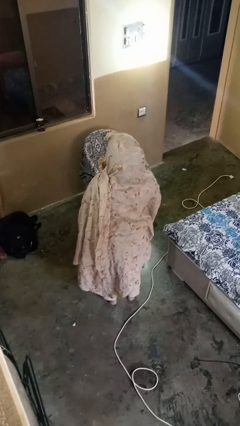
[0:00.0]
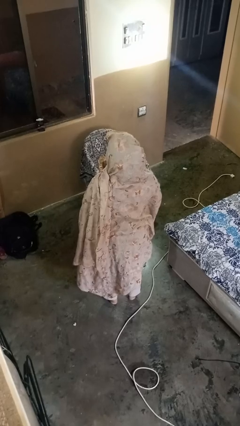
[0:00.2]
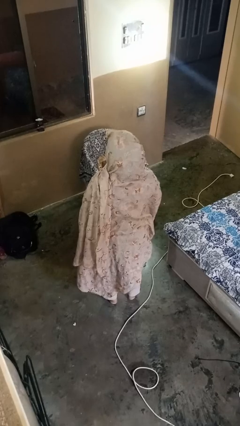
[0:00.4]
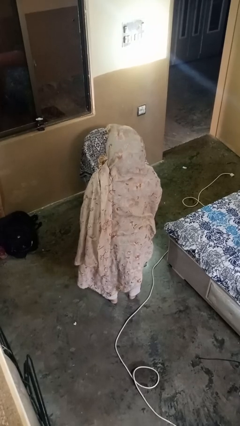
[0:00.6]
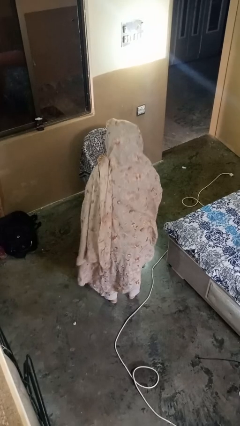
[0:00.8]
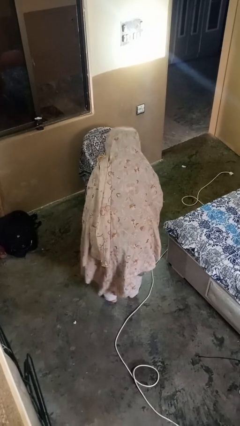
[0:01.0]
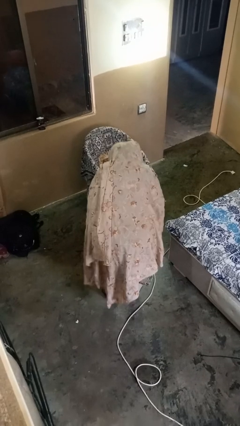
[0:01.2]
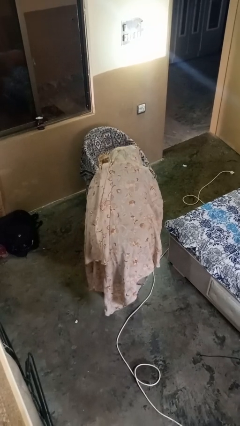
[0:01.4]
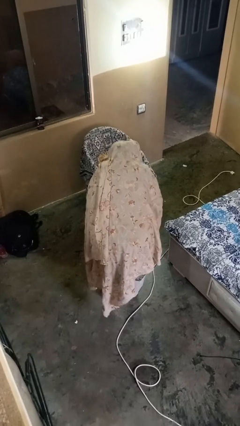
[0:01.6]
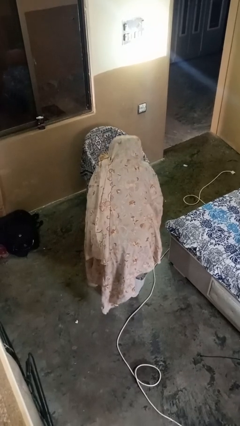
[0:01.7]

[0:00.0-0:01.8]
person bows

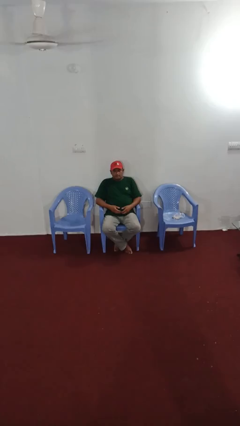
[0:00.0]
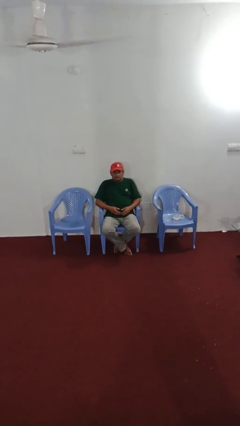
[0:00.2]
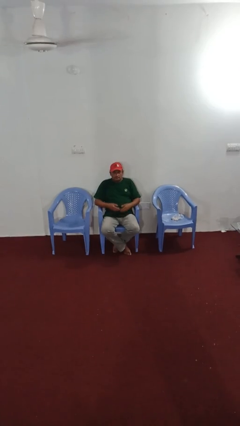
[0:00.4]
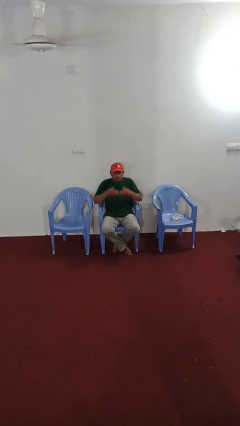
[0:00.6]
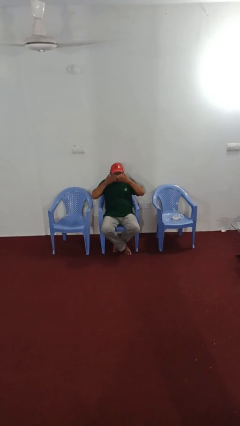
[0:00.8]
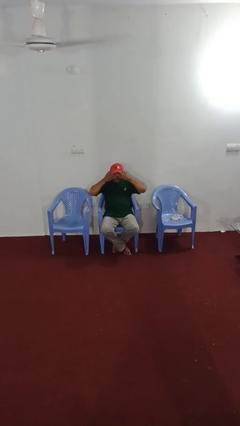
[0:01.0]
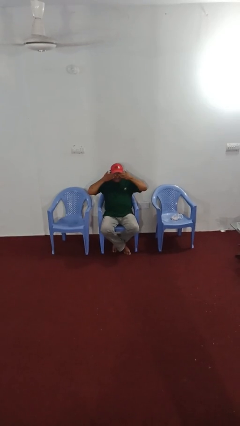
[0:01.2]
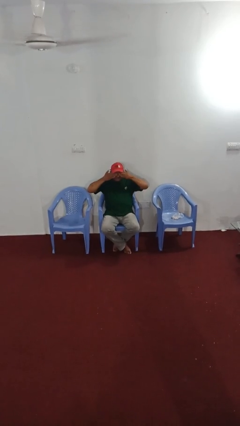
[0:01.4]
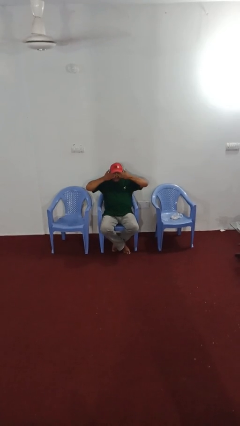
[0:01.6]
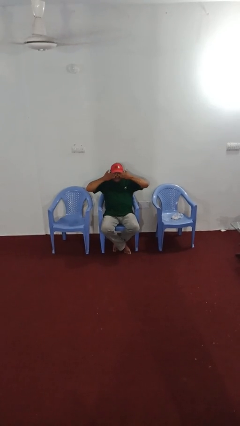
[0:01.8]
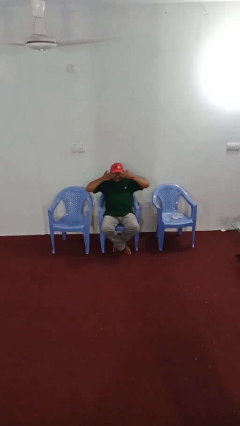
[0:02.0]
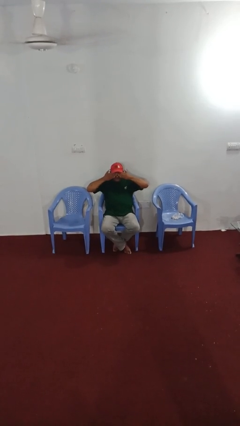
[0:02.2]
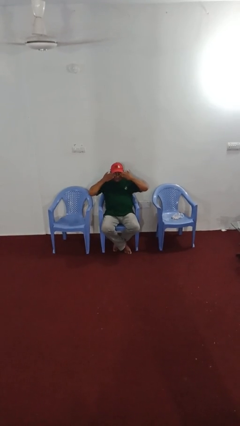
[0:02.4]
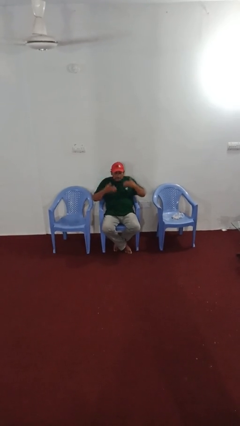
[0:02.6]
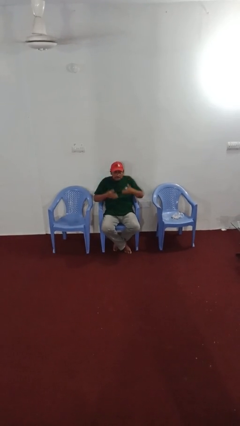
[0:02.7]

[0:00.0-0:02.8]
person rubs eyes

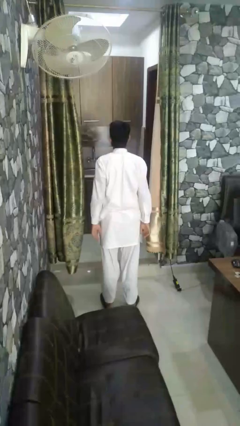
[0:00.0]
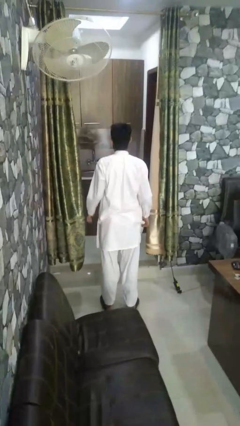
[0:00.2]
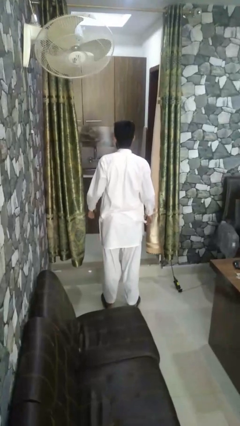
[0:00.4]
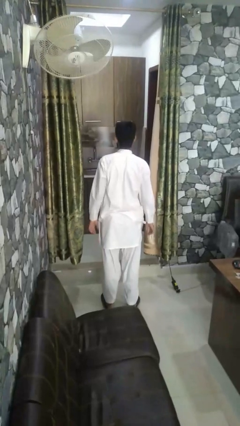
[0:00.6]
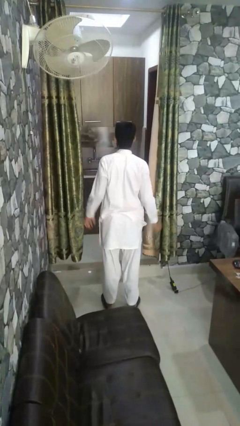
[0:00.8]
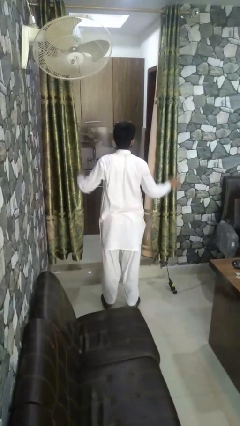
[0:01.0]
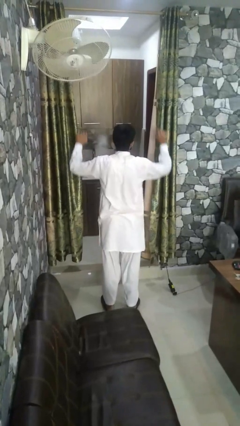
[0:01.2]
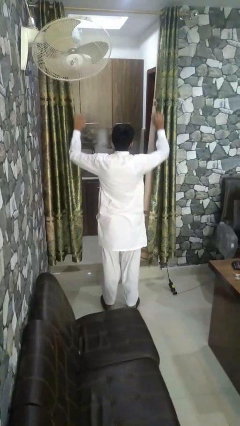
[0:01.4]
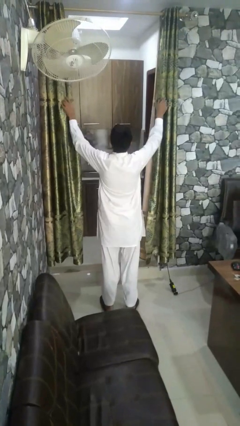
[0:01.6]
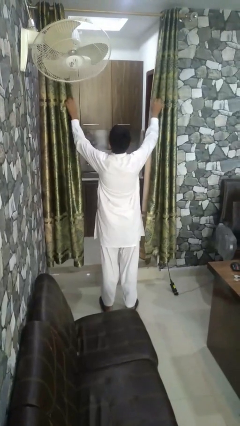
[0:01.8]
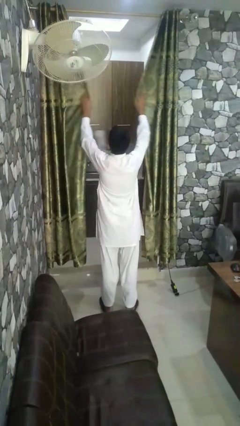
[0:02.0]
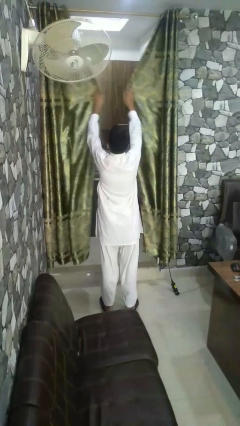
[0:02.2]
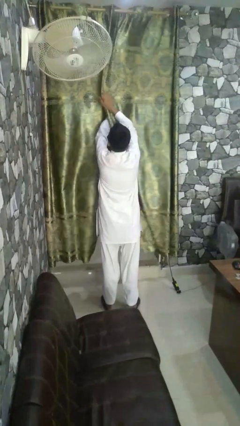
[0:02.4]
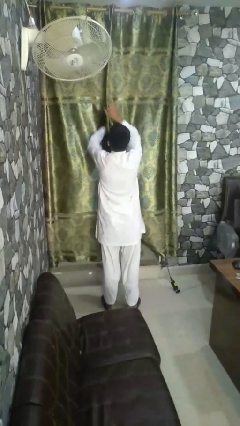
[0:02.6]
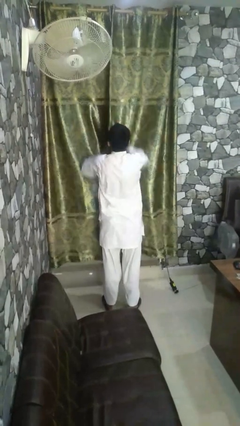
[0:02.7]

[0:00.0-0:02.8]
person closes curtains

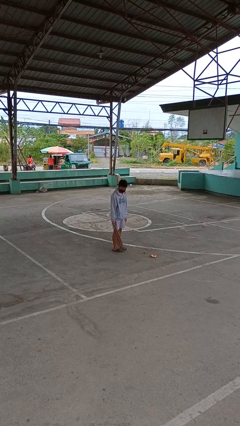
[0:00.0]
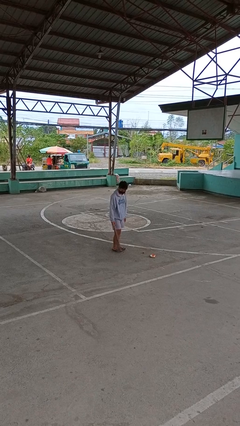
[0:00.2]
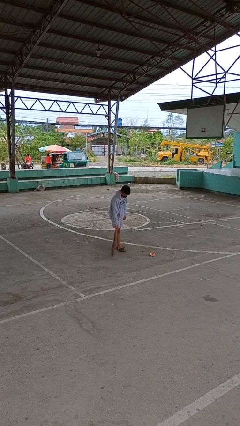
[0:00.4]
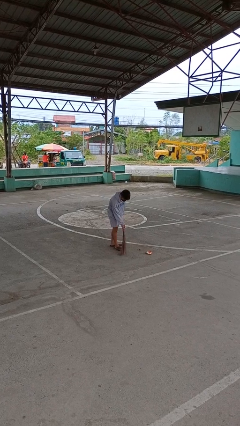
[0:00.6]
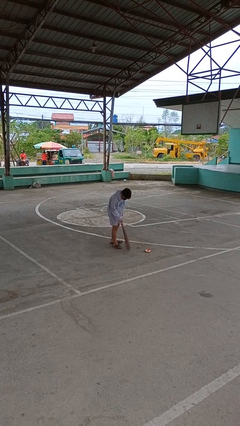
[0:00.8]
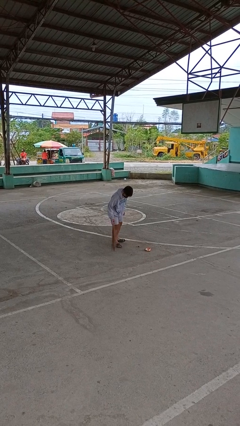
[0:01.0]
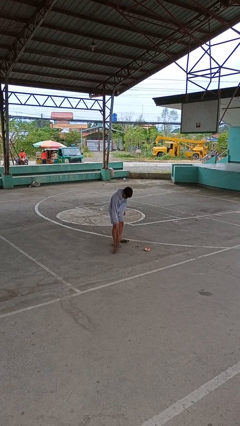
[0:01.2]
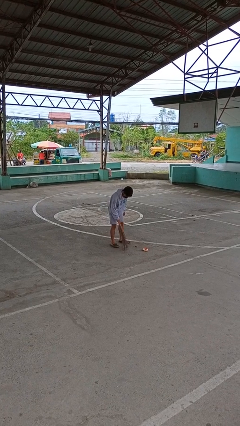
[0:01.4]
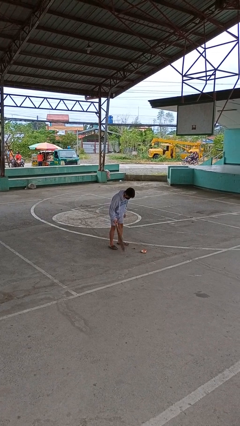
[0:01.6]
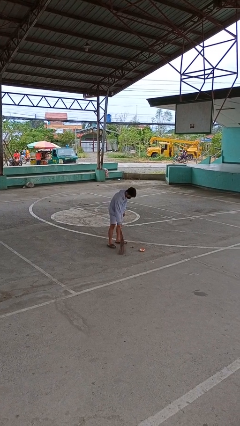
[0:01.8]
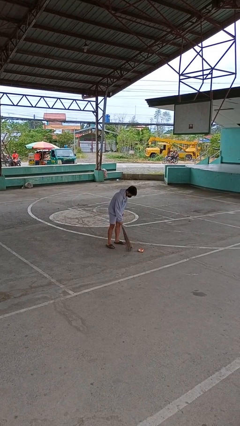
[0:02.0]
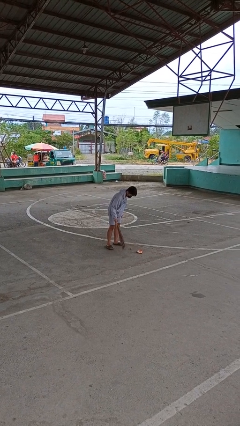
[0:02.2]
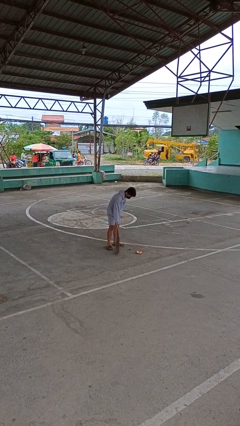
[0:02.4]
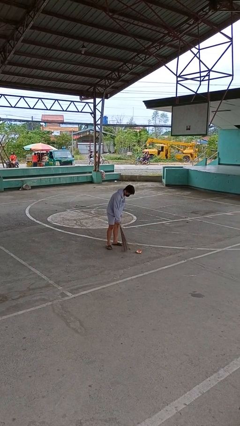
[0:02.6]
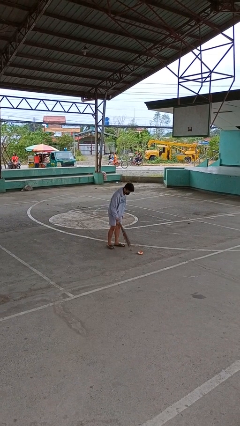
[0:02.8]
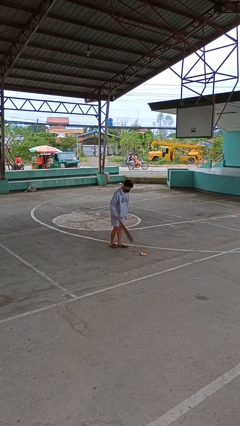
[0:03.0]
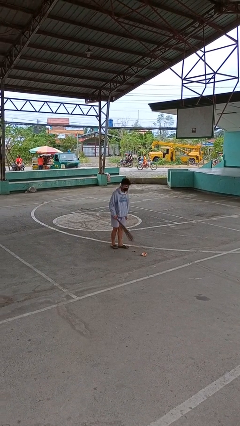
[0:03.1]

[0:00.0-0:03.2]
person sweeps floor

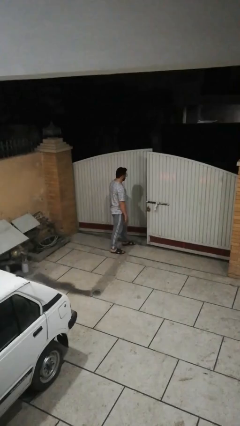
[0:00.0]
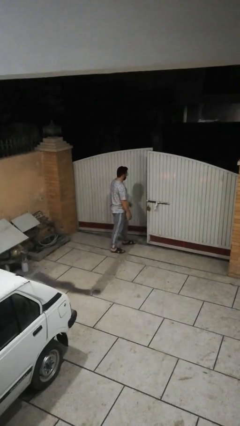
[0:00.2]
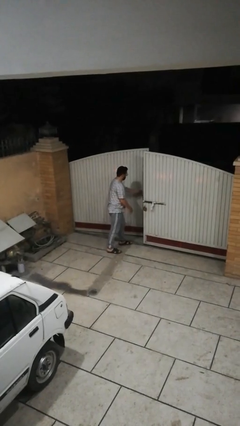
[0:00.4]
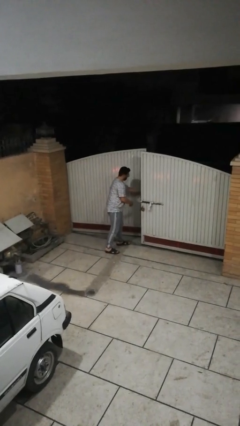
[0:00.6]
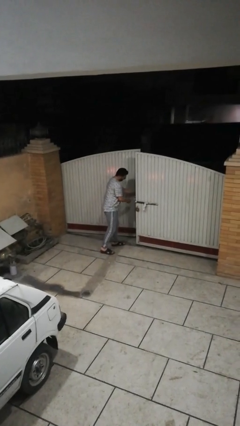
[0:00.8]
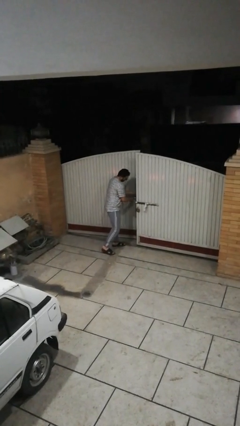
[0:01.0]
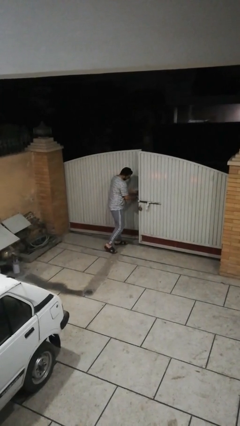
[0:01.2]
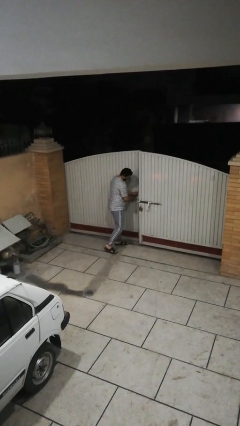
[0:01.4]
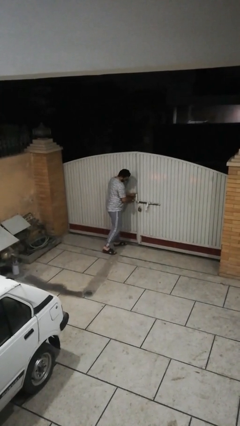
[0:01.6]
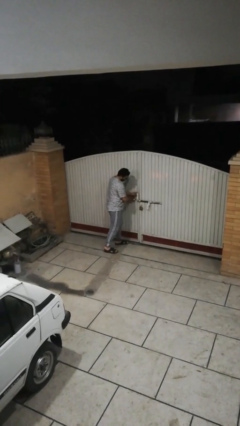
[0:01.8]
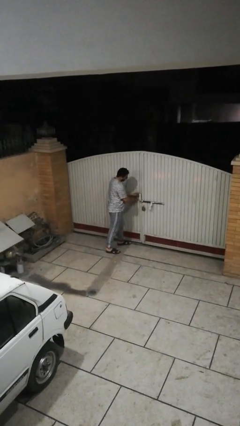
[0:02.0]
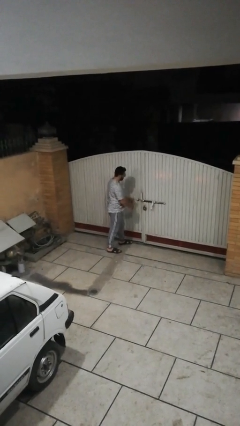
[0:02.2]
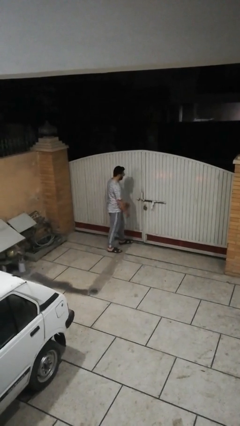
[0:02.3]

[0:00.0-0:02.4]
person closes facility door

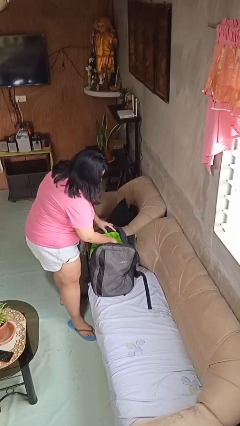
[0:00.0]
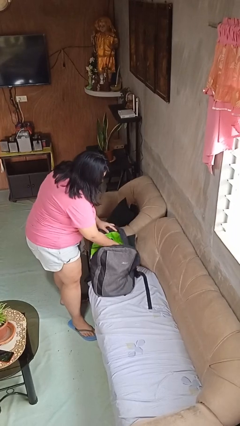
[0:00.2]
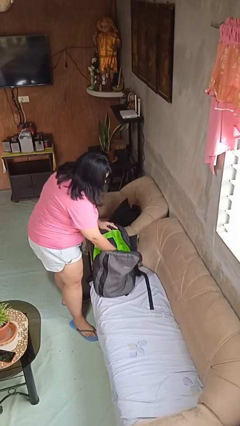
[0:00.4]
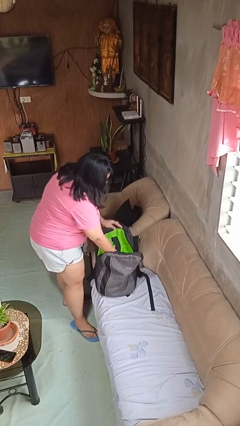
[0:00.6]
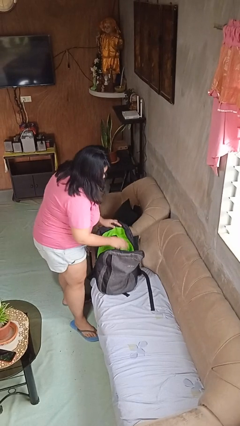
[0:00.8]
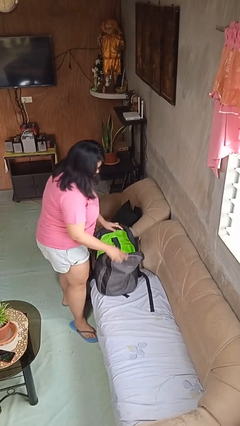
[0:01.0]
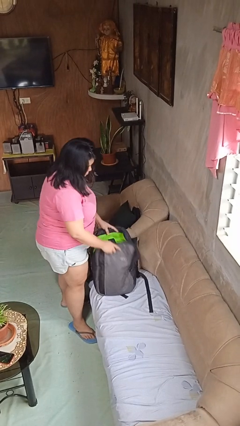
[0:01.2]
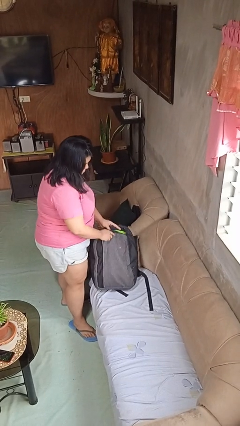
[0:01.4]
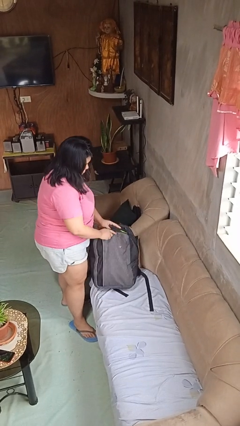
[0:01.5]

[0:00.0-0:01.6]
person puts object into backpack

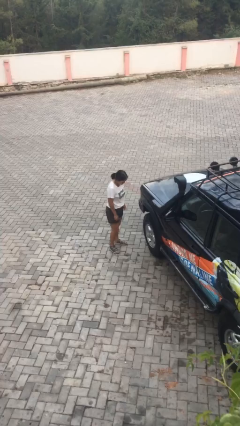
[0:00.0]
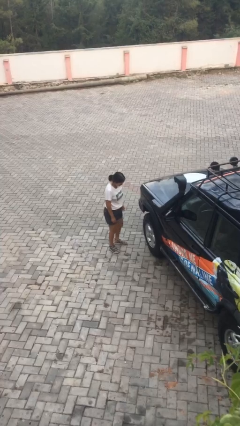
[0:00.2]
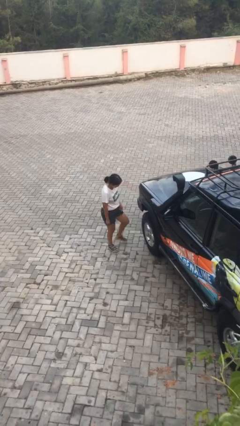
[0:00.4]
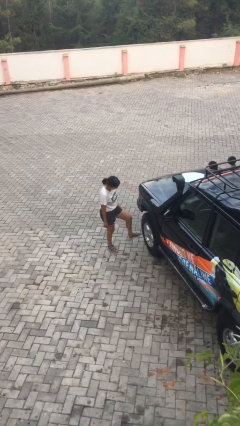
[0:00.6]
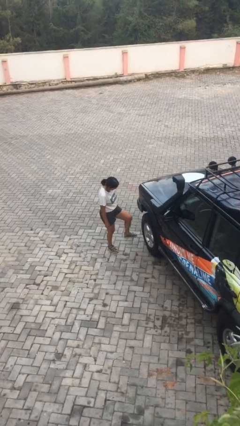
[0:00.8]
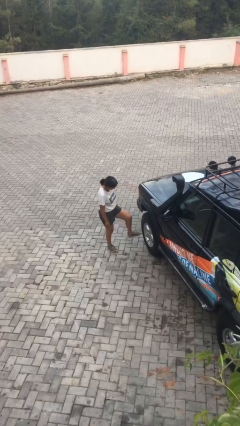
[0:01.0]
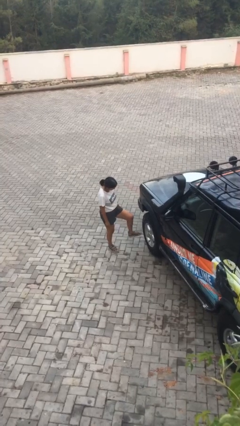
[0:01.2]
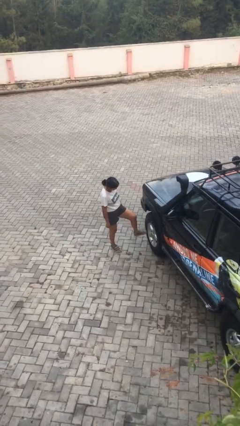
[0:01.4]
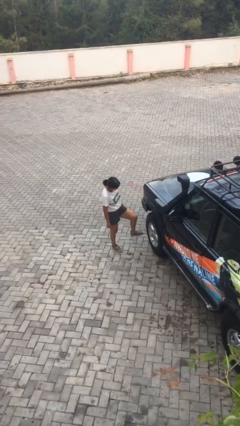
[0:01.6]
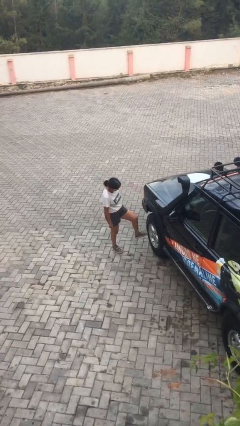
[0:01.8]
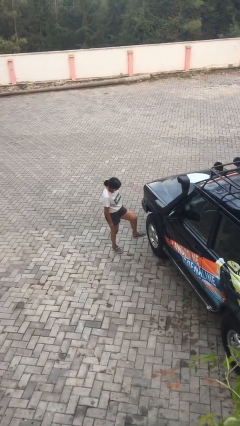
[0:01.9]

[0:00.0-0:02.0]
person kicks car tires
